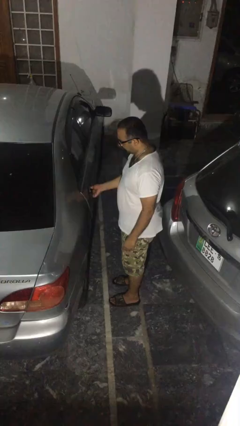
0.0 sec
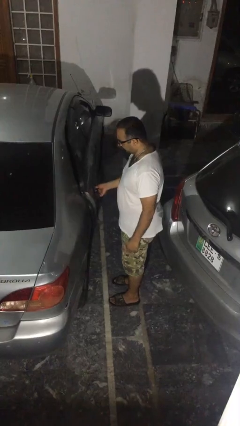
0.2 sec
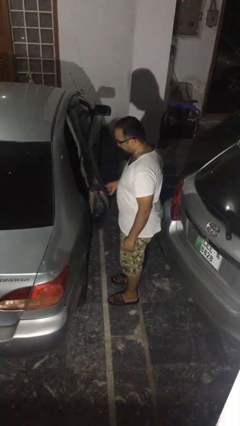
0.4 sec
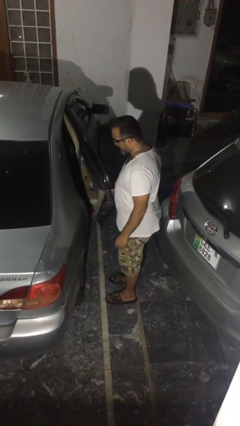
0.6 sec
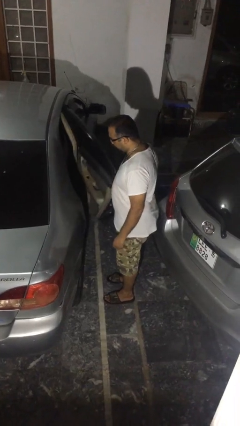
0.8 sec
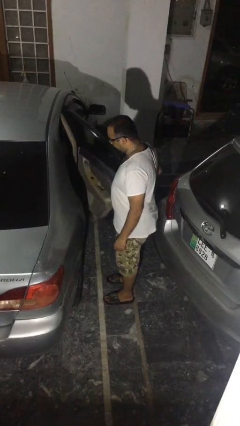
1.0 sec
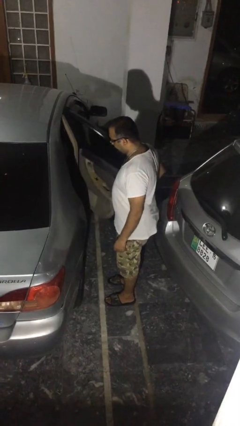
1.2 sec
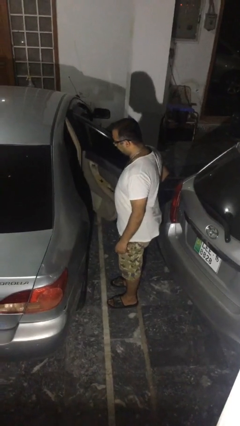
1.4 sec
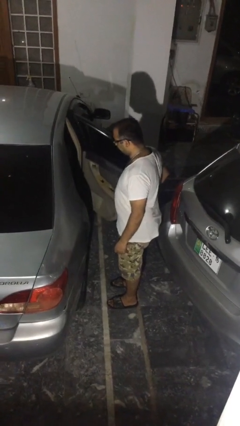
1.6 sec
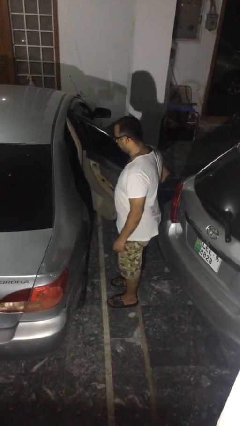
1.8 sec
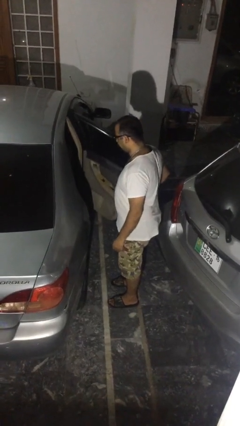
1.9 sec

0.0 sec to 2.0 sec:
person opens car door

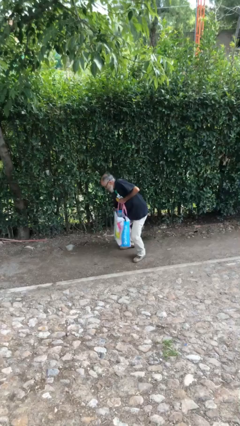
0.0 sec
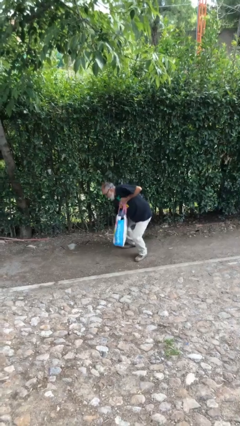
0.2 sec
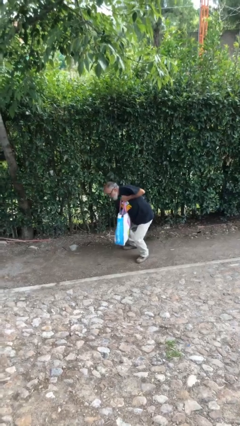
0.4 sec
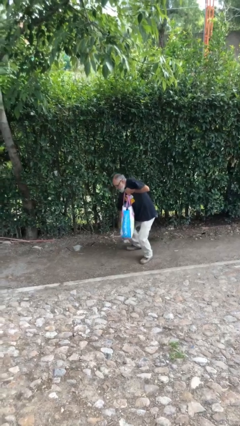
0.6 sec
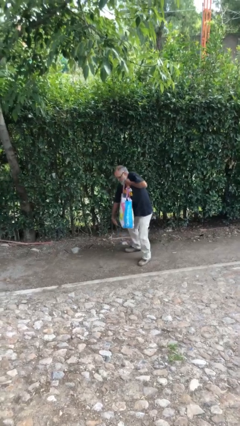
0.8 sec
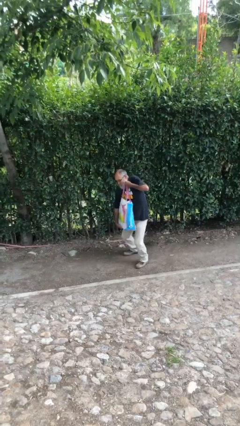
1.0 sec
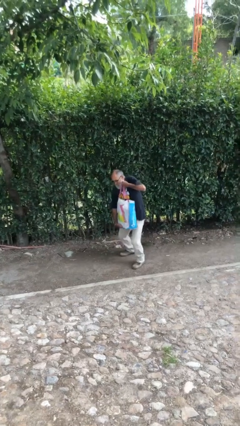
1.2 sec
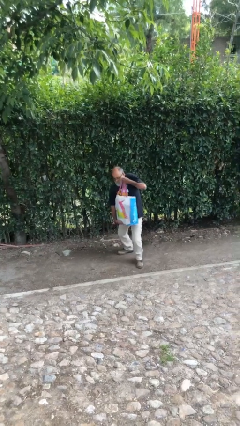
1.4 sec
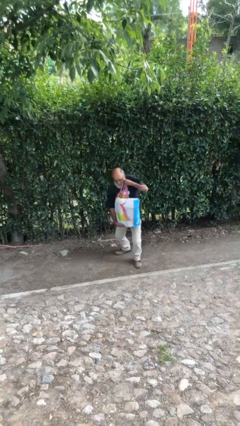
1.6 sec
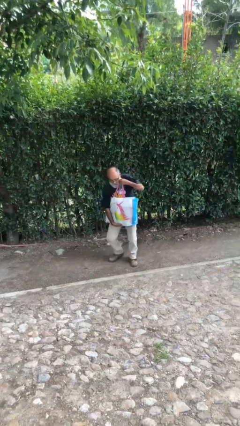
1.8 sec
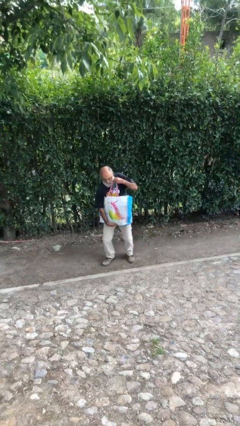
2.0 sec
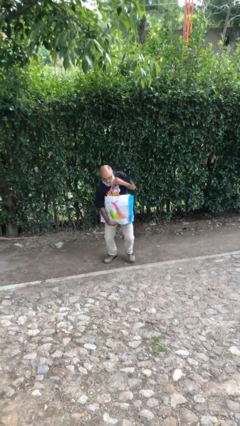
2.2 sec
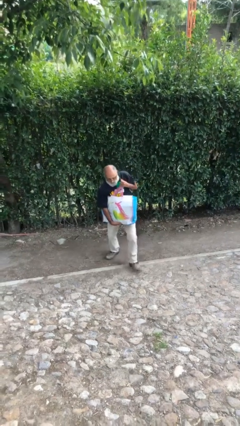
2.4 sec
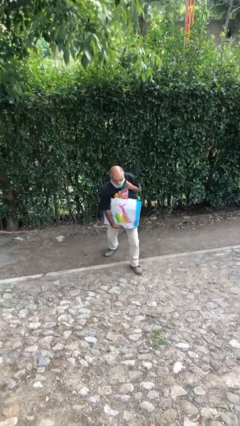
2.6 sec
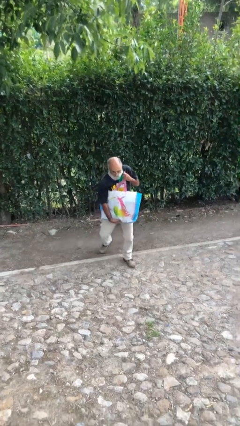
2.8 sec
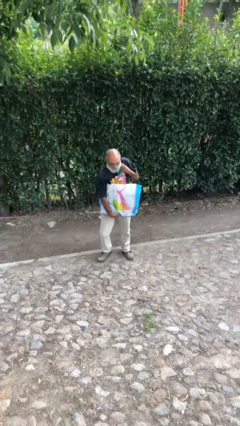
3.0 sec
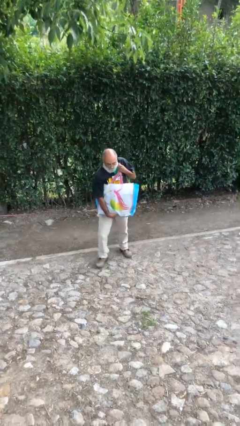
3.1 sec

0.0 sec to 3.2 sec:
person carries heavy object

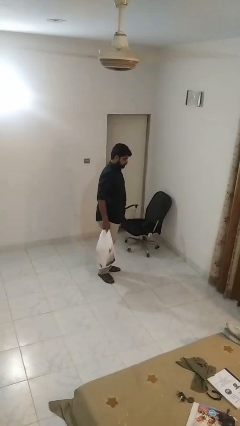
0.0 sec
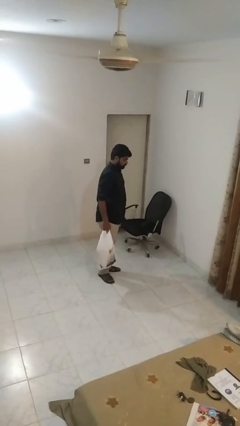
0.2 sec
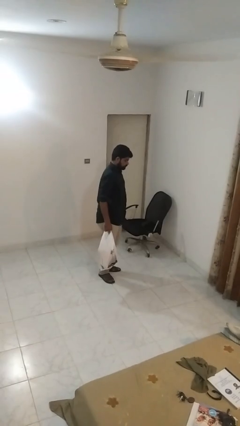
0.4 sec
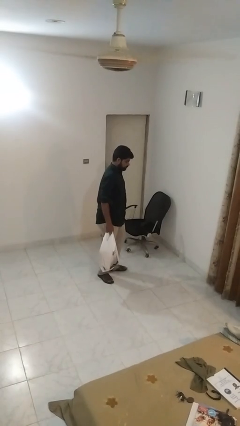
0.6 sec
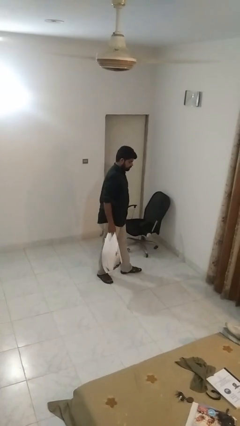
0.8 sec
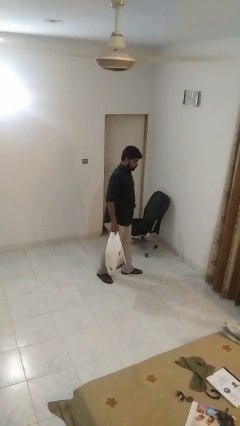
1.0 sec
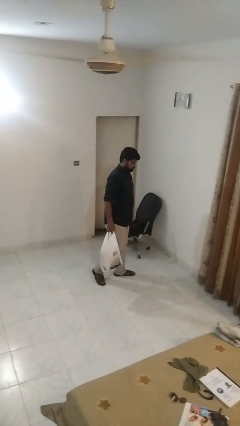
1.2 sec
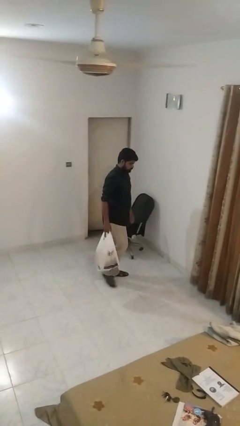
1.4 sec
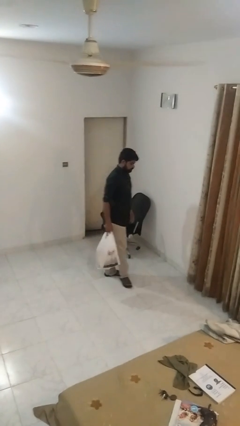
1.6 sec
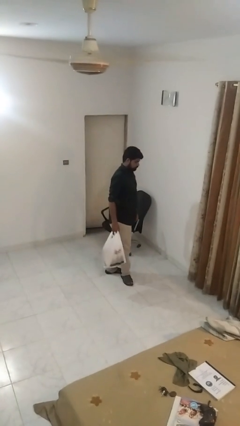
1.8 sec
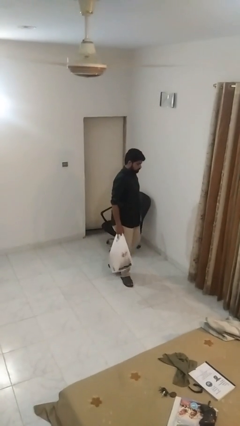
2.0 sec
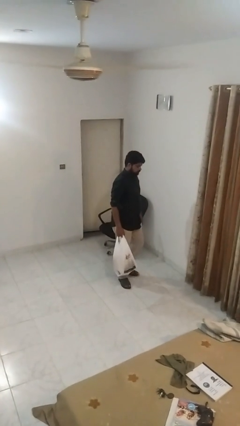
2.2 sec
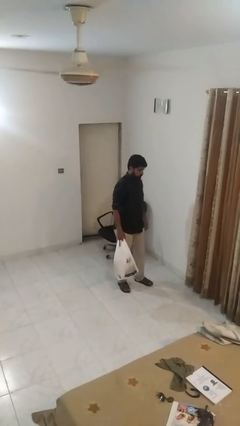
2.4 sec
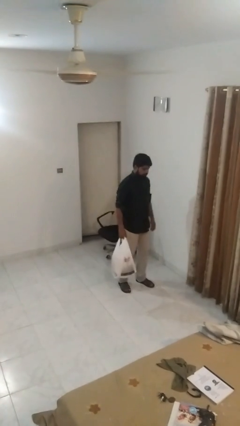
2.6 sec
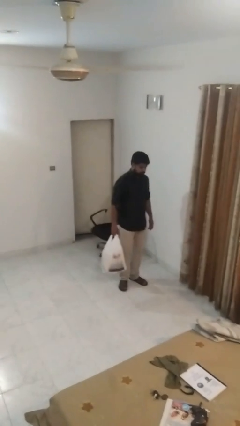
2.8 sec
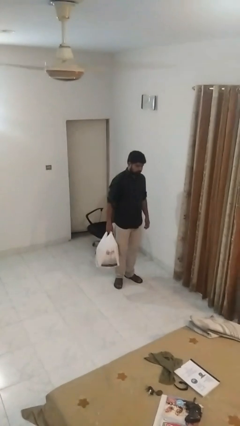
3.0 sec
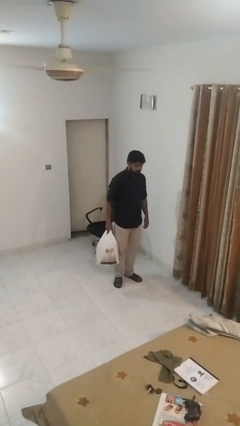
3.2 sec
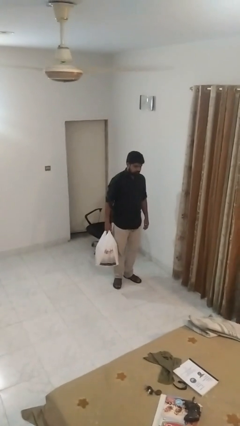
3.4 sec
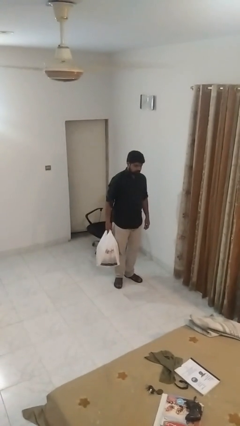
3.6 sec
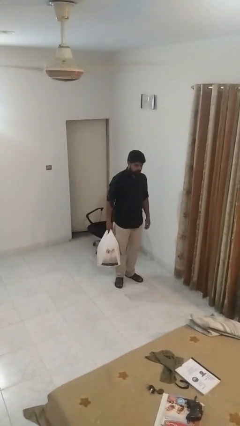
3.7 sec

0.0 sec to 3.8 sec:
person carries groceries

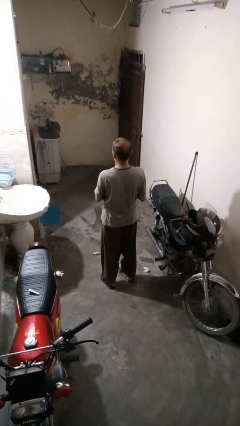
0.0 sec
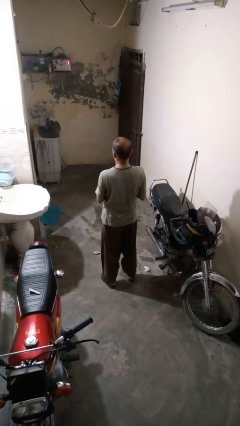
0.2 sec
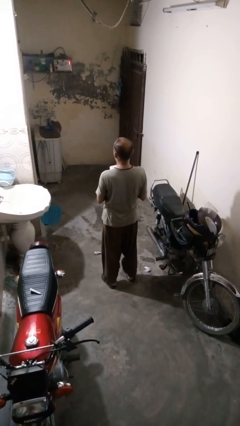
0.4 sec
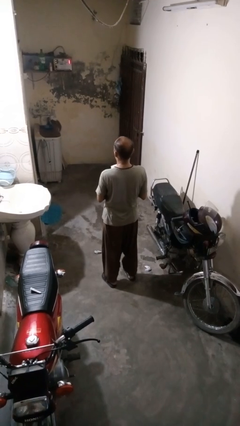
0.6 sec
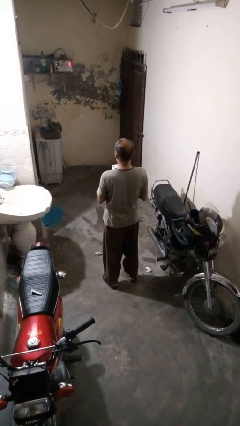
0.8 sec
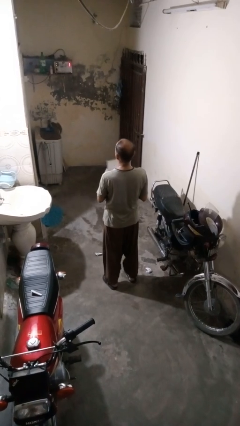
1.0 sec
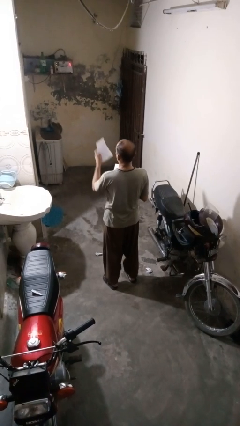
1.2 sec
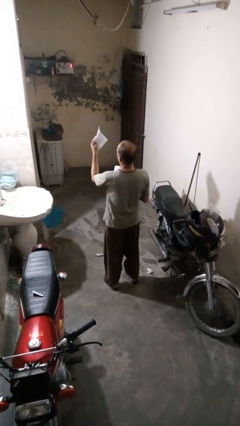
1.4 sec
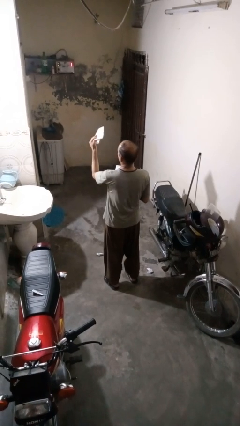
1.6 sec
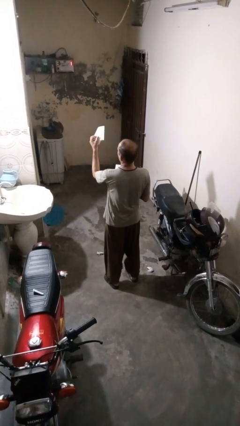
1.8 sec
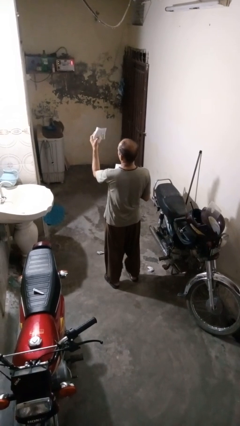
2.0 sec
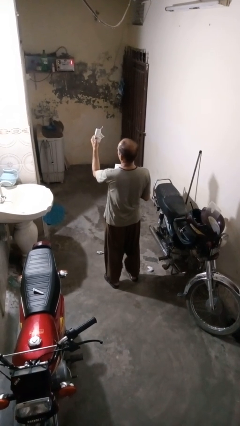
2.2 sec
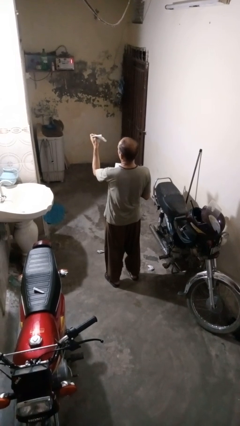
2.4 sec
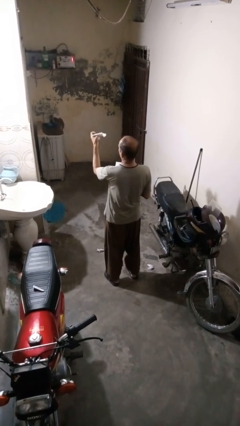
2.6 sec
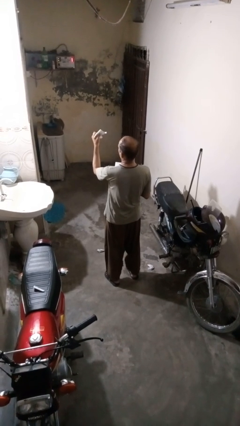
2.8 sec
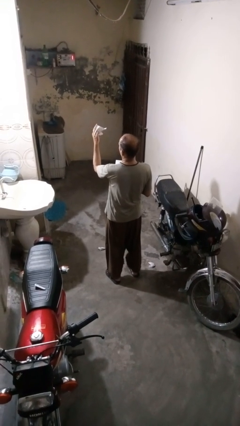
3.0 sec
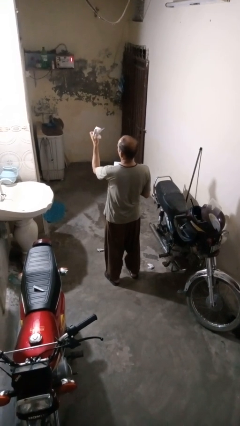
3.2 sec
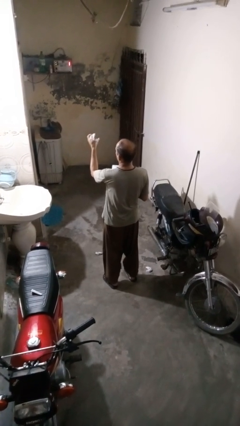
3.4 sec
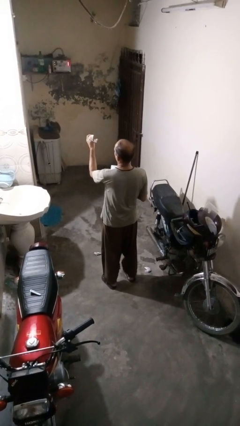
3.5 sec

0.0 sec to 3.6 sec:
person crumples paper

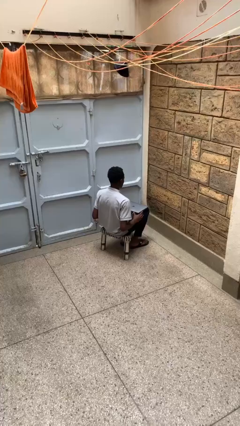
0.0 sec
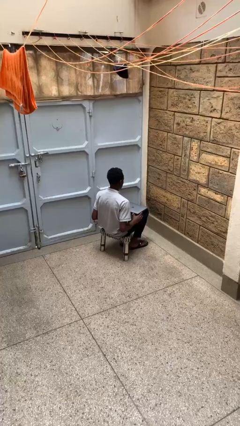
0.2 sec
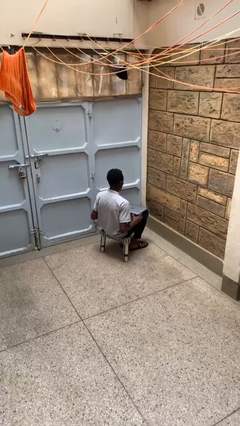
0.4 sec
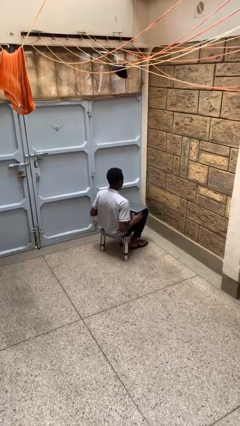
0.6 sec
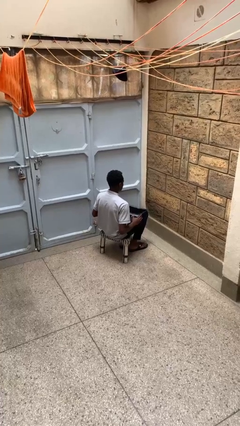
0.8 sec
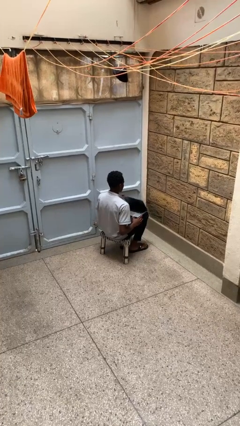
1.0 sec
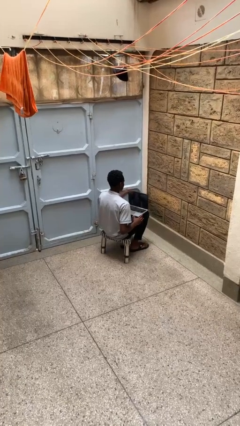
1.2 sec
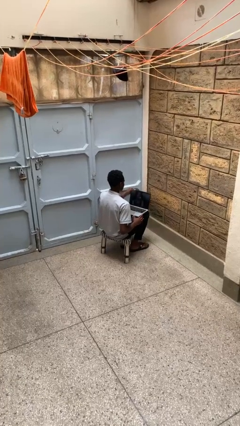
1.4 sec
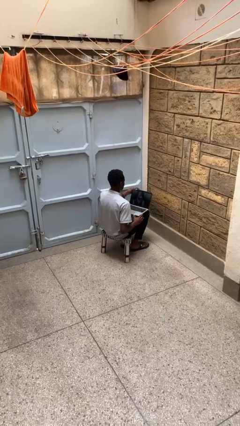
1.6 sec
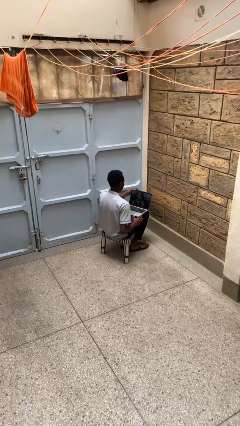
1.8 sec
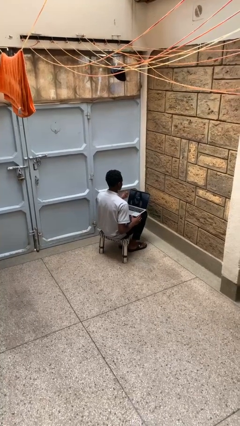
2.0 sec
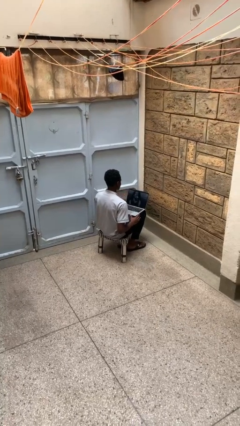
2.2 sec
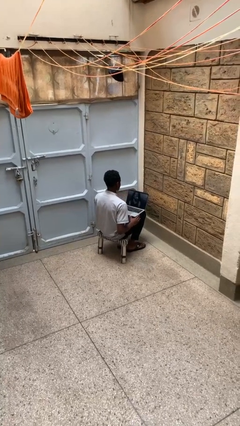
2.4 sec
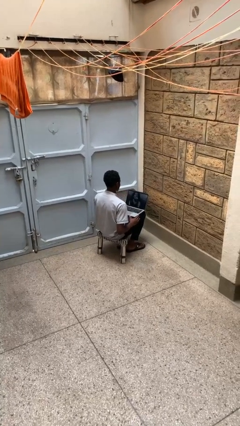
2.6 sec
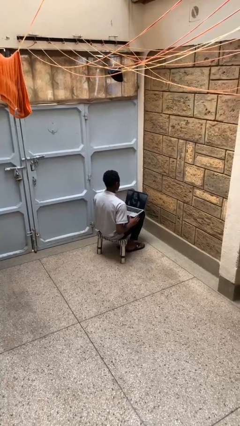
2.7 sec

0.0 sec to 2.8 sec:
person opens laptop

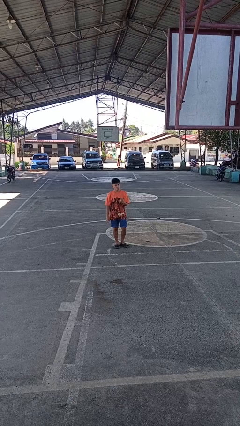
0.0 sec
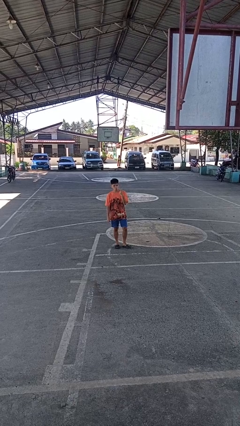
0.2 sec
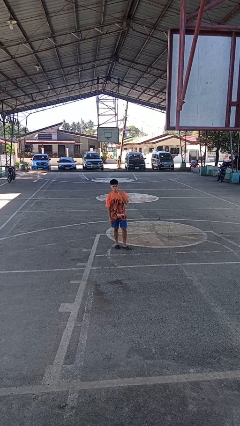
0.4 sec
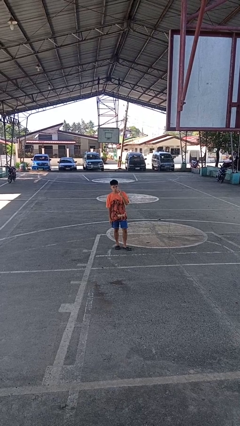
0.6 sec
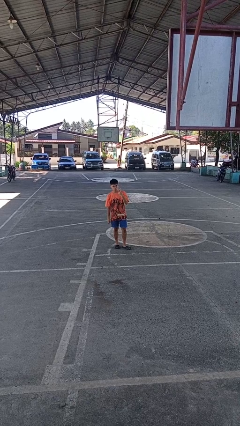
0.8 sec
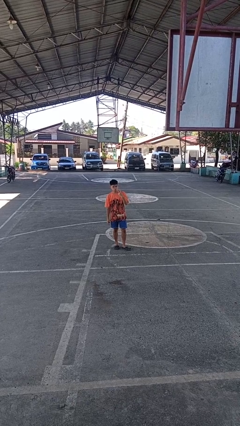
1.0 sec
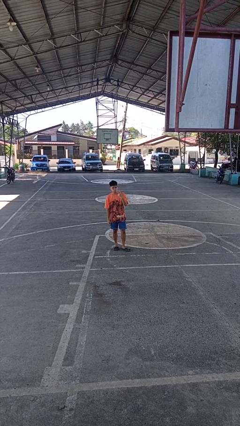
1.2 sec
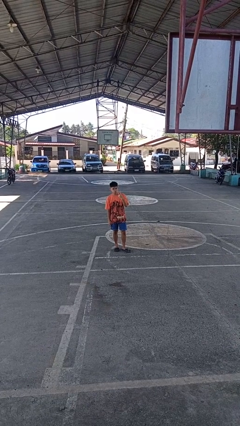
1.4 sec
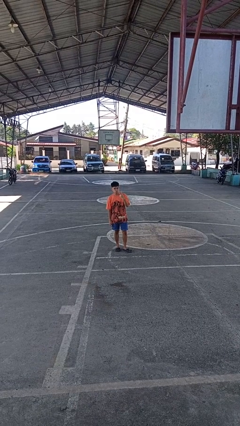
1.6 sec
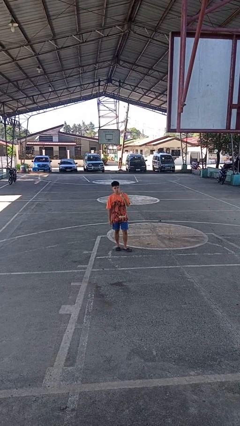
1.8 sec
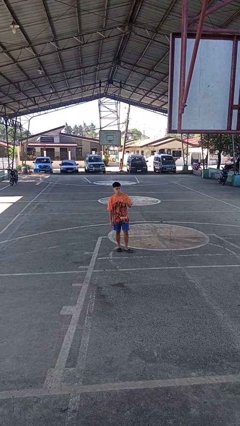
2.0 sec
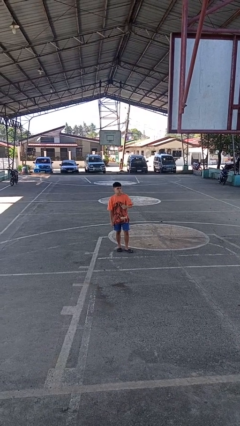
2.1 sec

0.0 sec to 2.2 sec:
person gestures peace
